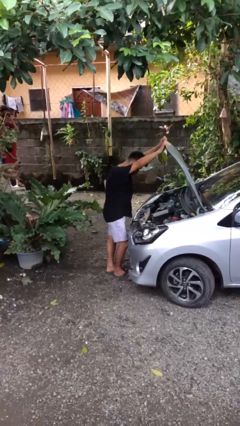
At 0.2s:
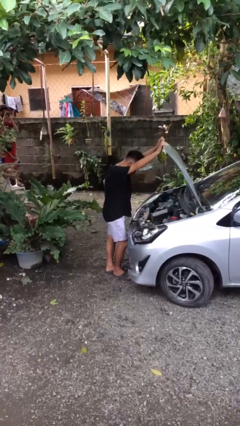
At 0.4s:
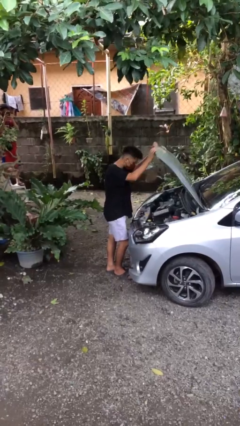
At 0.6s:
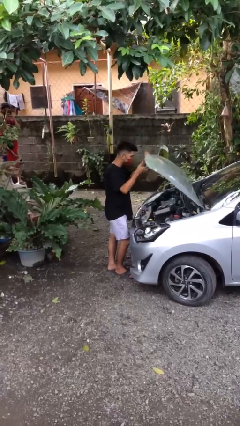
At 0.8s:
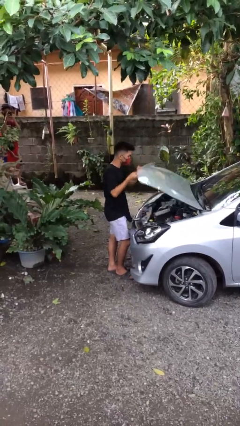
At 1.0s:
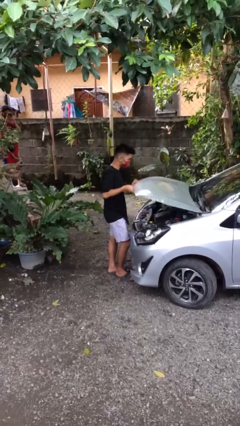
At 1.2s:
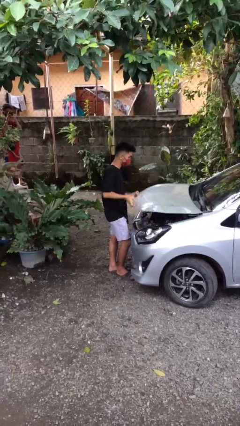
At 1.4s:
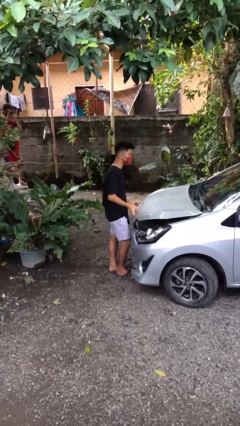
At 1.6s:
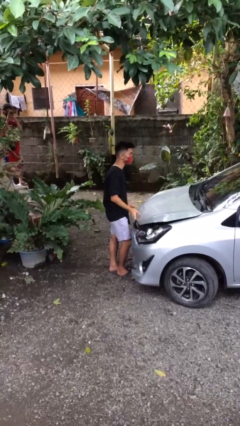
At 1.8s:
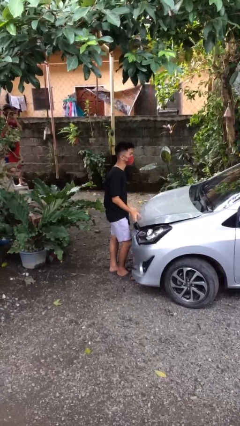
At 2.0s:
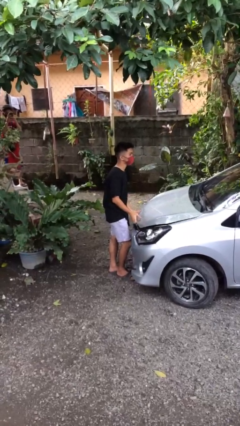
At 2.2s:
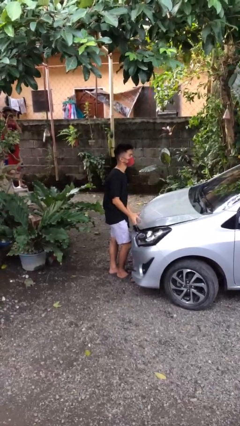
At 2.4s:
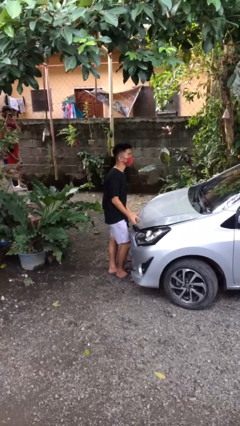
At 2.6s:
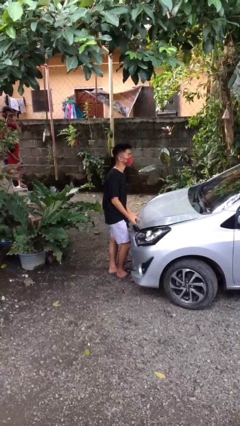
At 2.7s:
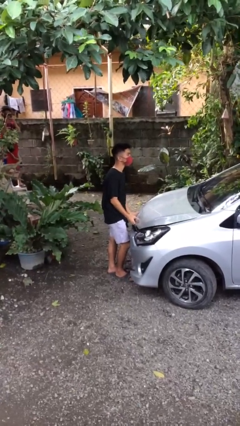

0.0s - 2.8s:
person closes car hood

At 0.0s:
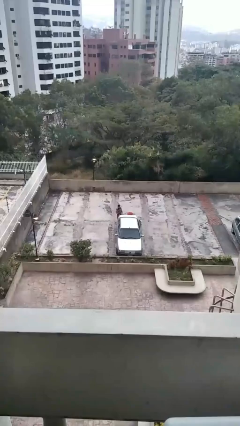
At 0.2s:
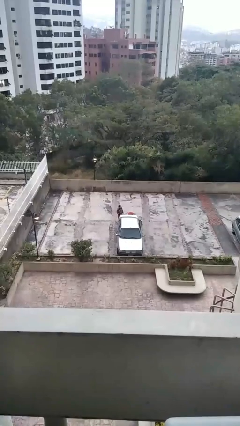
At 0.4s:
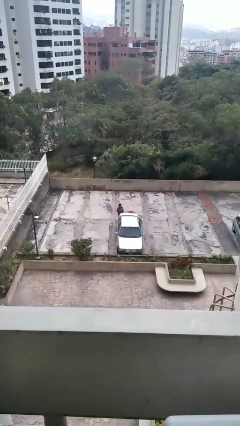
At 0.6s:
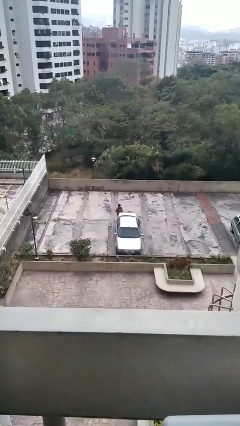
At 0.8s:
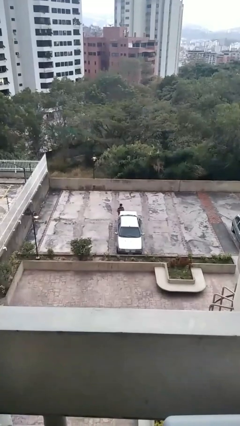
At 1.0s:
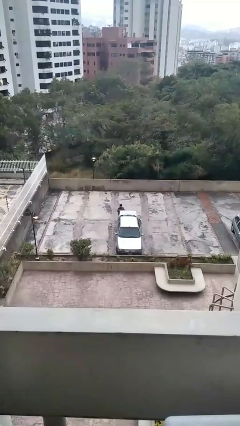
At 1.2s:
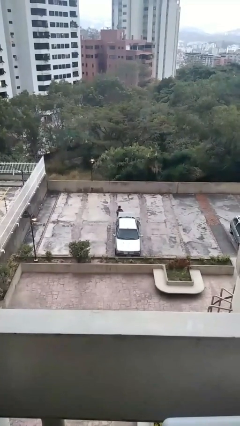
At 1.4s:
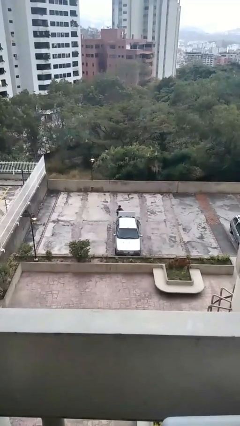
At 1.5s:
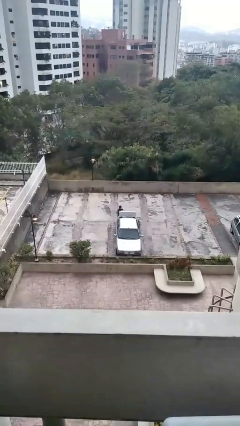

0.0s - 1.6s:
person opens car trunk

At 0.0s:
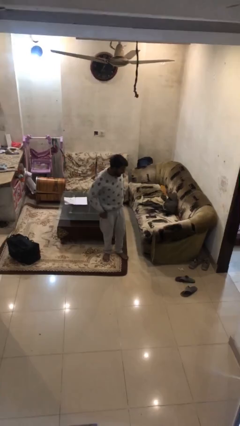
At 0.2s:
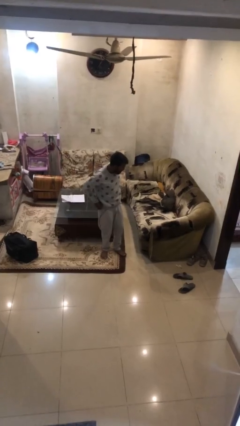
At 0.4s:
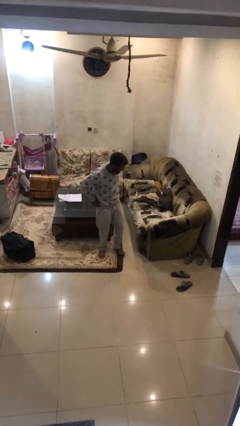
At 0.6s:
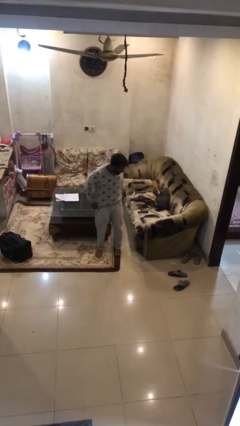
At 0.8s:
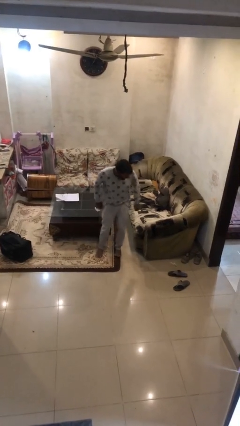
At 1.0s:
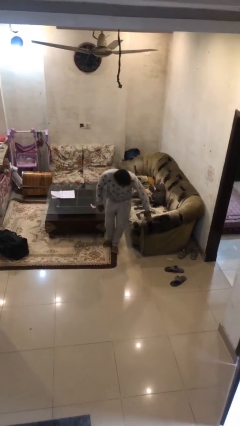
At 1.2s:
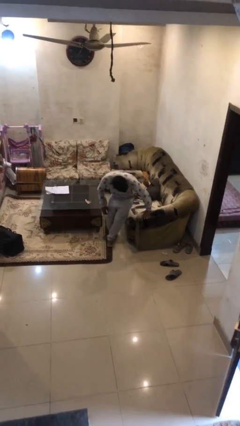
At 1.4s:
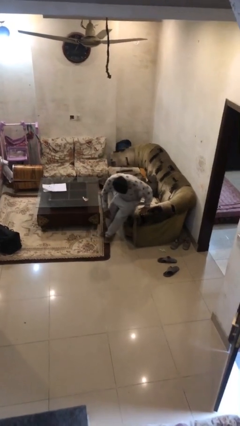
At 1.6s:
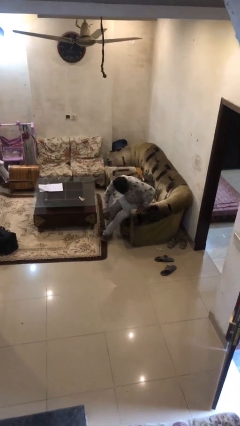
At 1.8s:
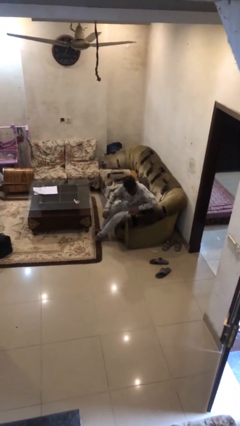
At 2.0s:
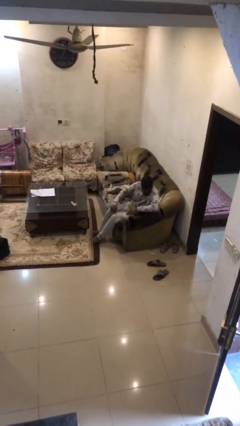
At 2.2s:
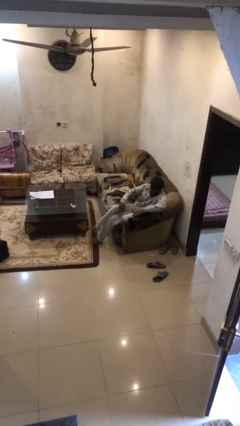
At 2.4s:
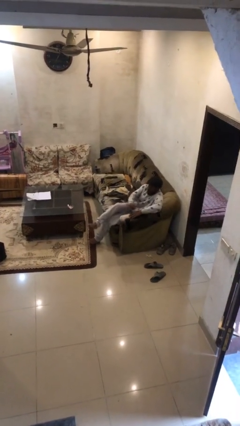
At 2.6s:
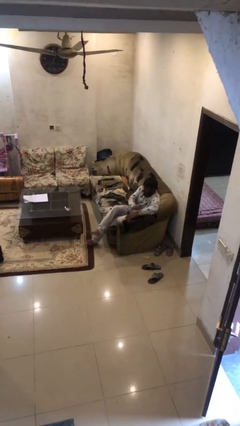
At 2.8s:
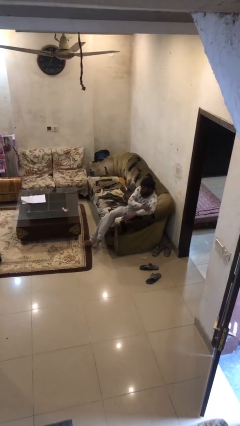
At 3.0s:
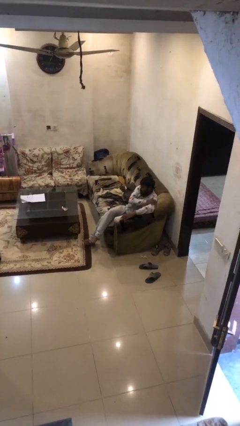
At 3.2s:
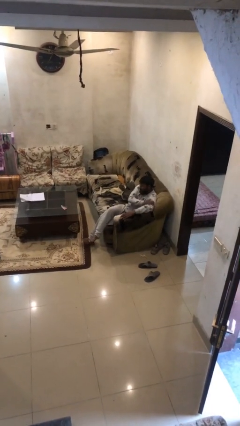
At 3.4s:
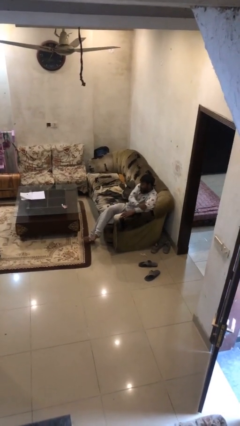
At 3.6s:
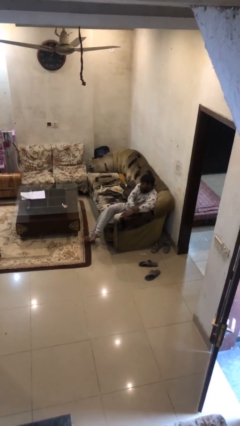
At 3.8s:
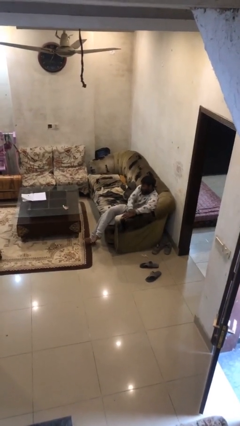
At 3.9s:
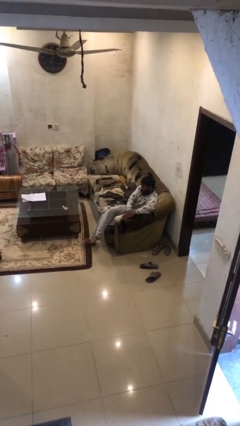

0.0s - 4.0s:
person sits down

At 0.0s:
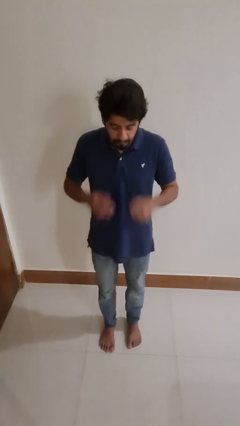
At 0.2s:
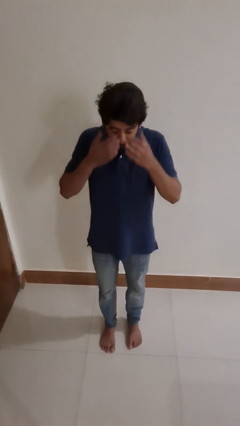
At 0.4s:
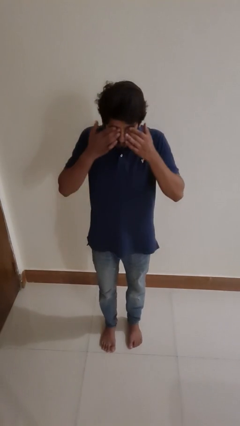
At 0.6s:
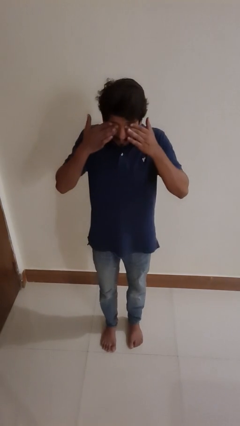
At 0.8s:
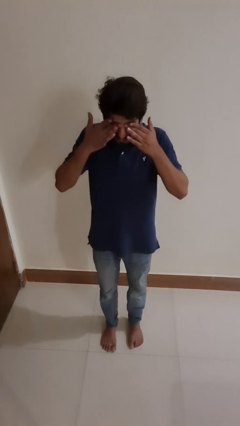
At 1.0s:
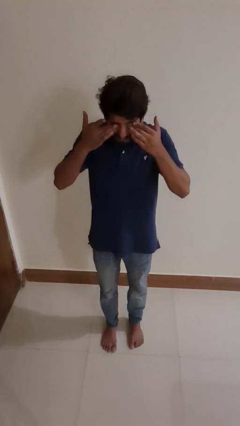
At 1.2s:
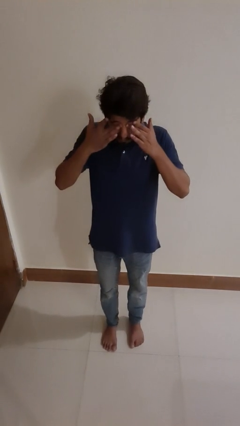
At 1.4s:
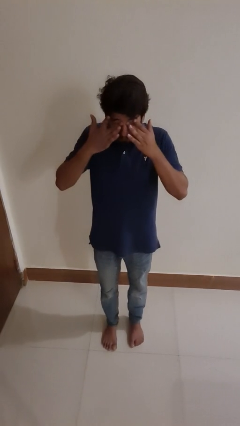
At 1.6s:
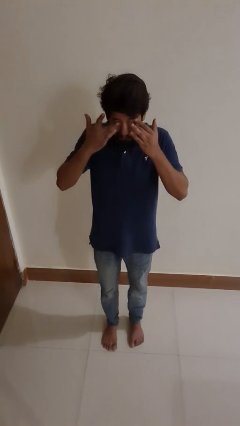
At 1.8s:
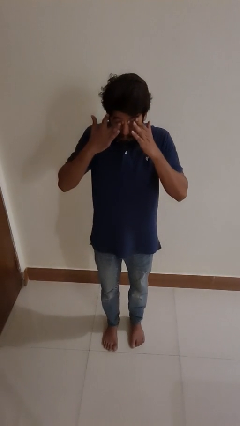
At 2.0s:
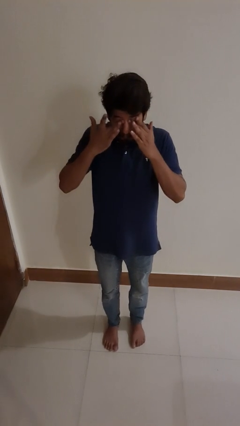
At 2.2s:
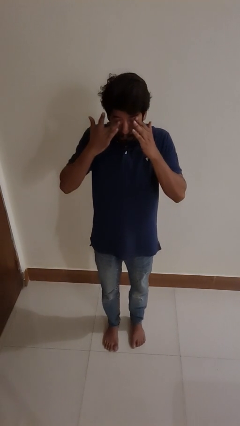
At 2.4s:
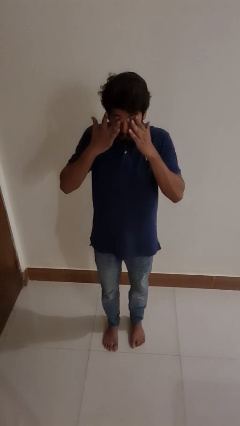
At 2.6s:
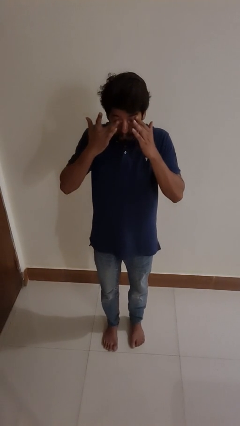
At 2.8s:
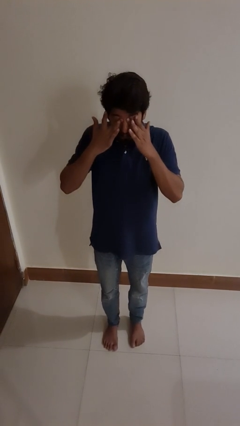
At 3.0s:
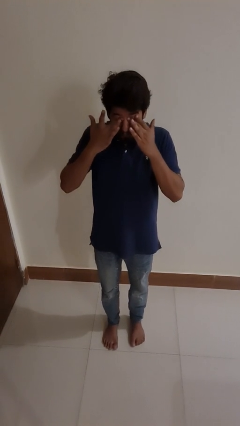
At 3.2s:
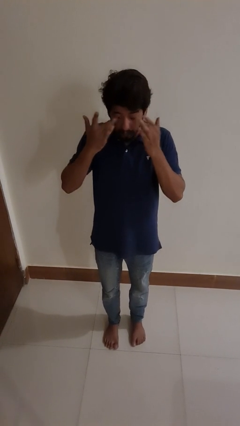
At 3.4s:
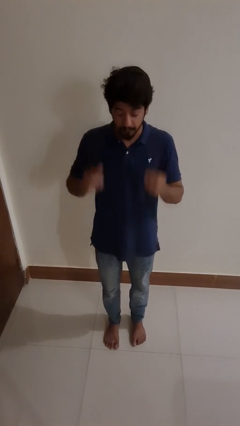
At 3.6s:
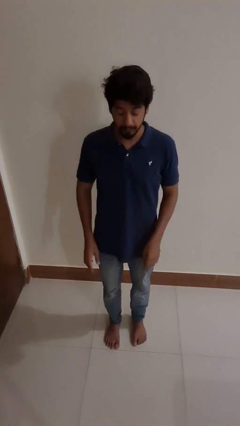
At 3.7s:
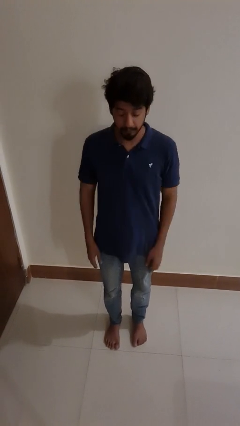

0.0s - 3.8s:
person rubs eyes

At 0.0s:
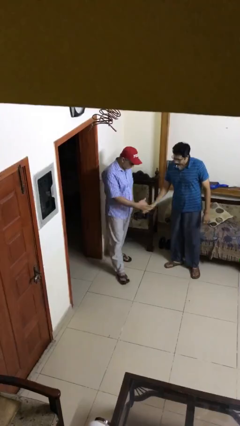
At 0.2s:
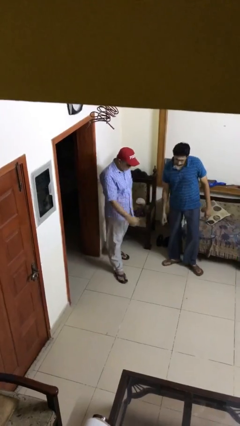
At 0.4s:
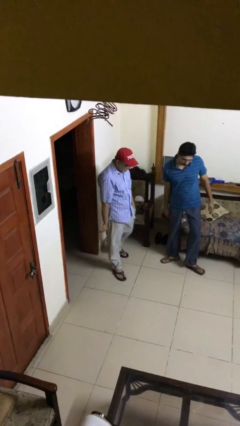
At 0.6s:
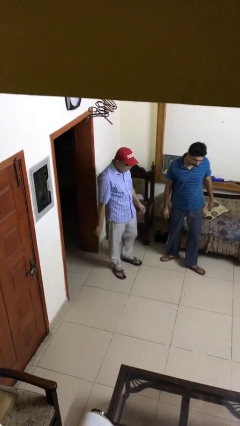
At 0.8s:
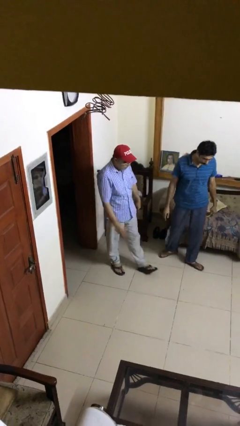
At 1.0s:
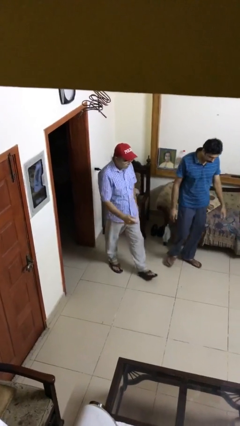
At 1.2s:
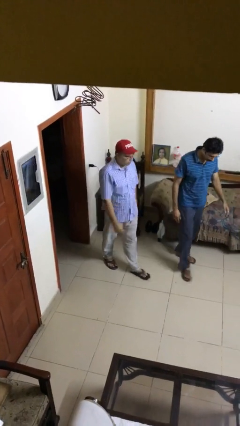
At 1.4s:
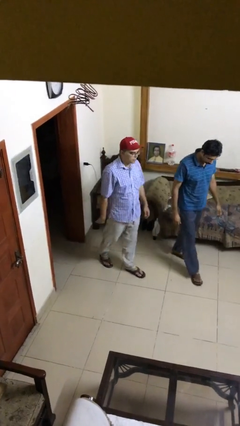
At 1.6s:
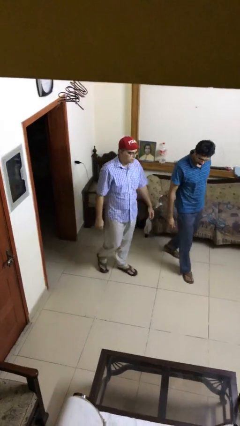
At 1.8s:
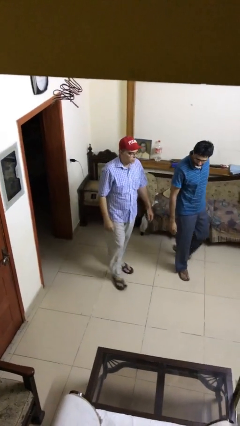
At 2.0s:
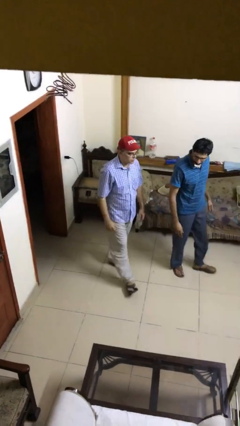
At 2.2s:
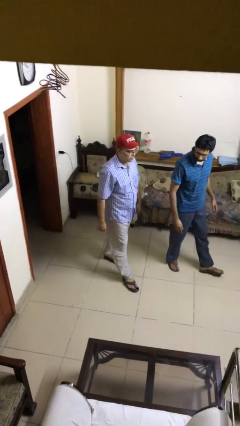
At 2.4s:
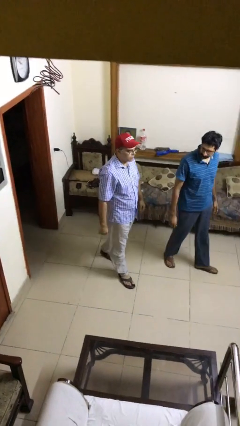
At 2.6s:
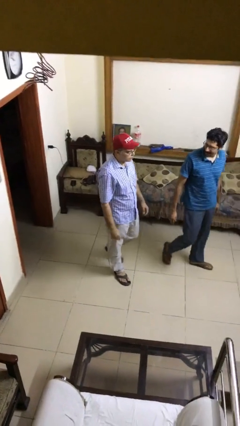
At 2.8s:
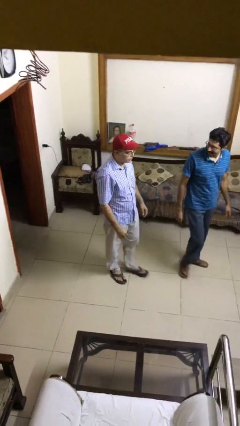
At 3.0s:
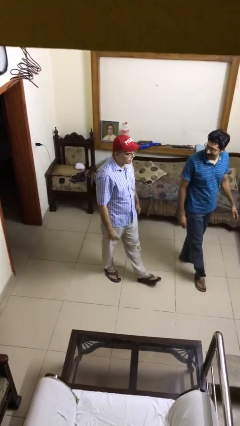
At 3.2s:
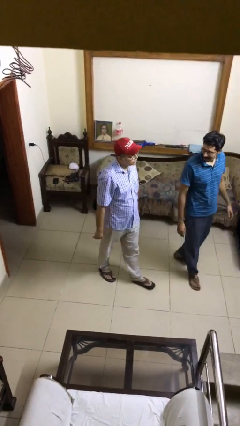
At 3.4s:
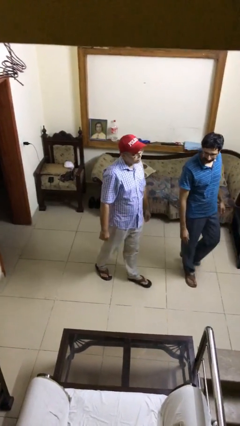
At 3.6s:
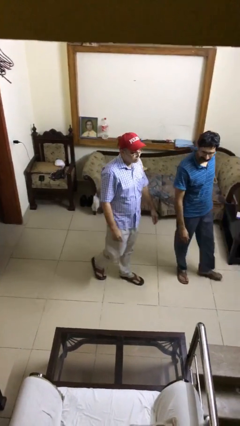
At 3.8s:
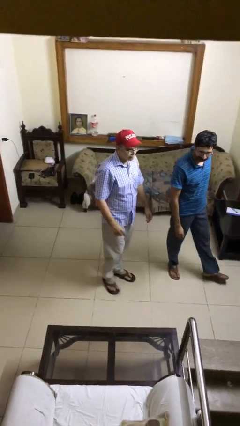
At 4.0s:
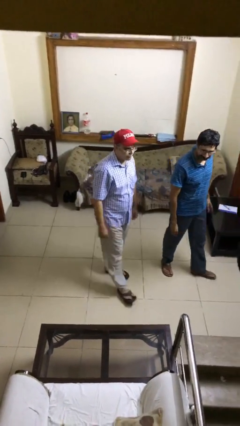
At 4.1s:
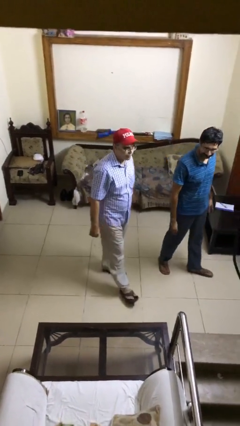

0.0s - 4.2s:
person talks to person

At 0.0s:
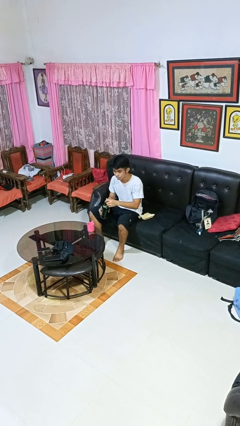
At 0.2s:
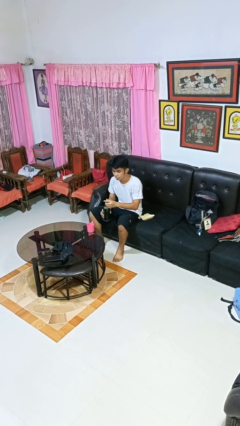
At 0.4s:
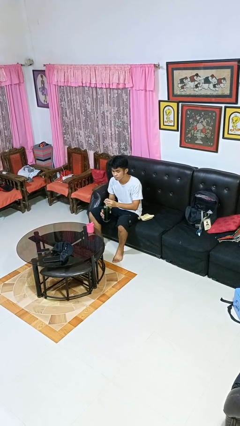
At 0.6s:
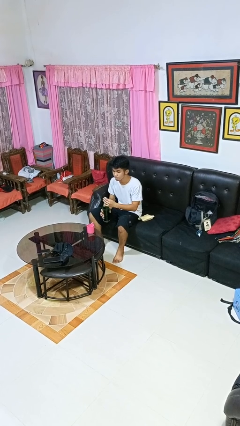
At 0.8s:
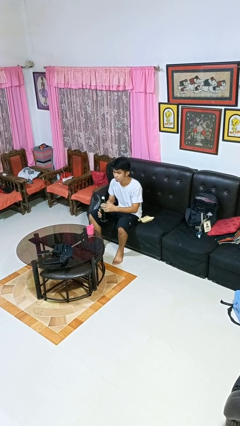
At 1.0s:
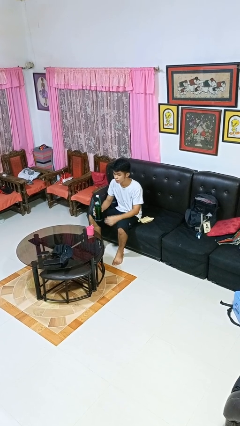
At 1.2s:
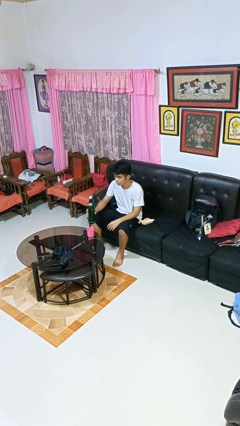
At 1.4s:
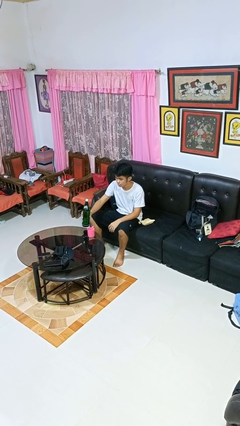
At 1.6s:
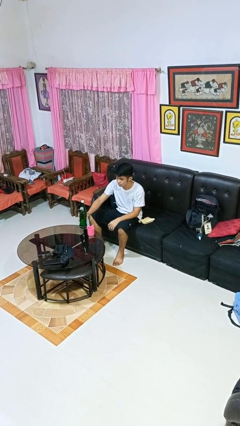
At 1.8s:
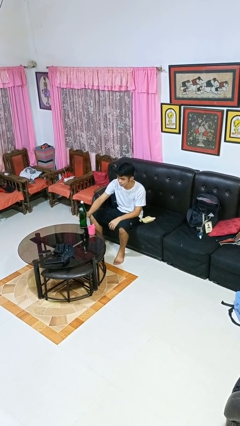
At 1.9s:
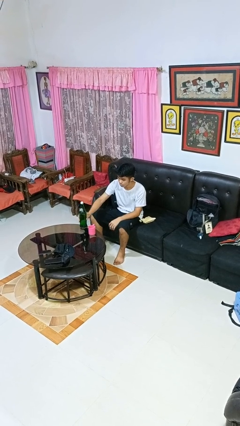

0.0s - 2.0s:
person screws lid to bottle
